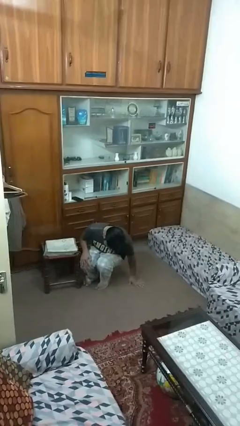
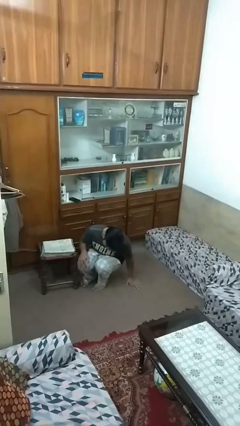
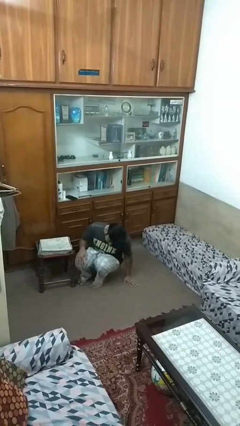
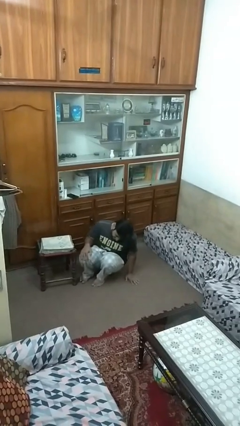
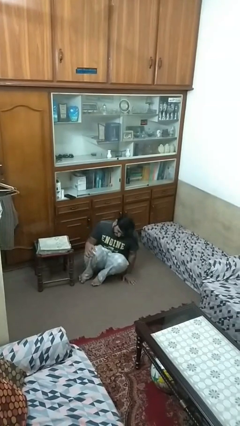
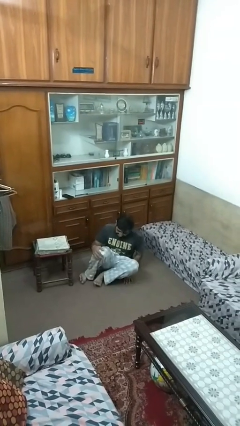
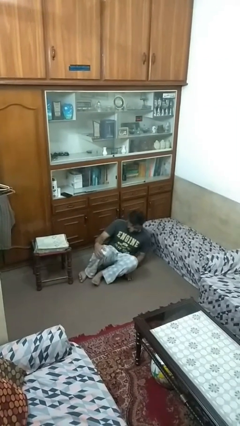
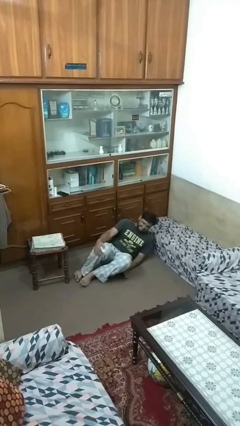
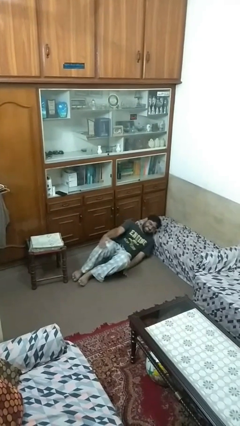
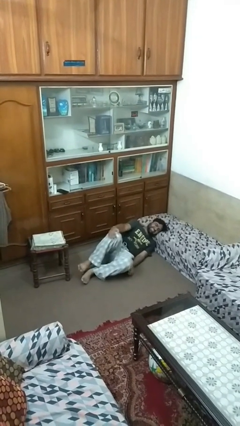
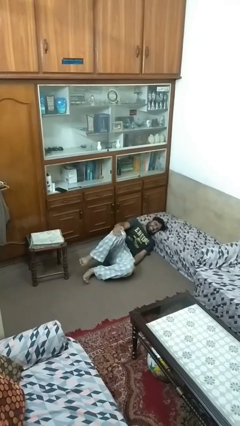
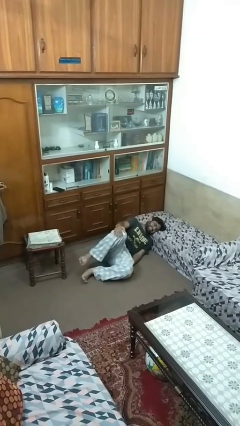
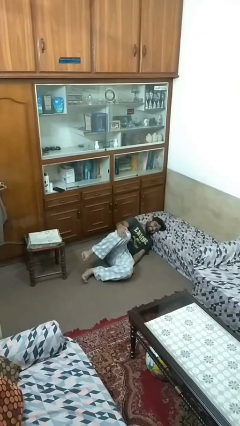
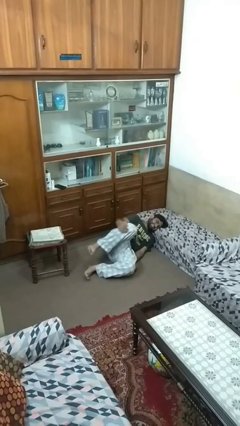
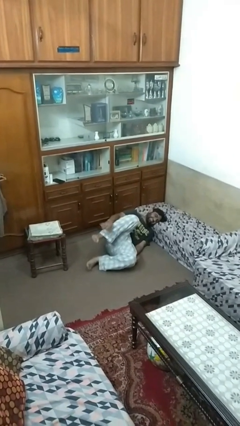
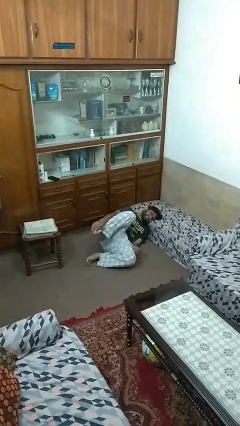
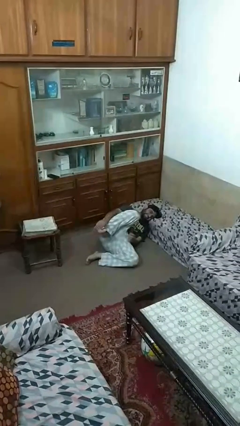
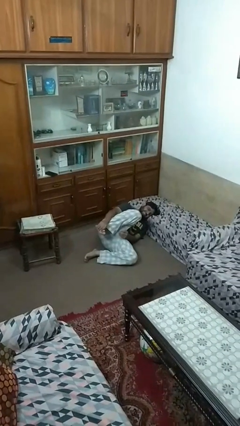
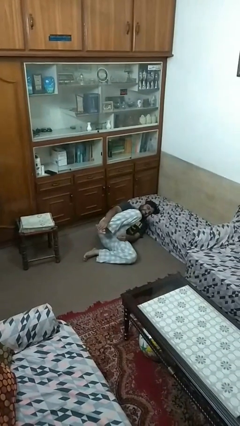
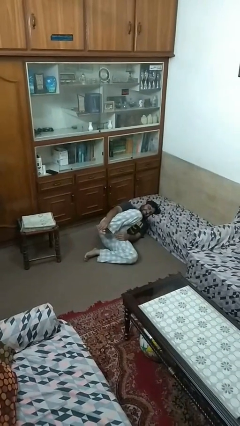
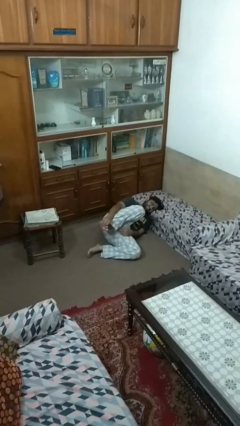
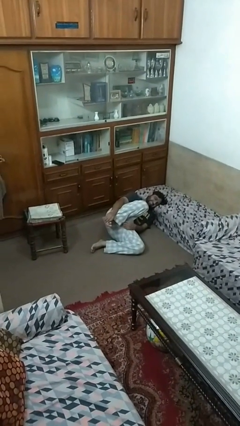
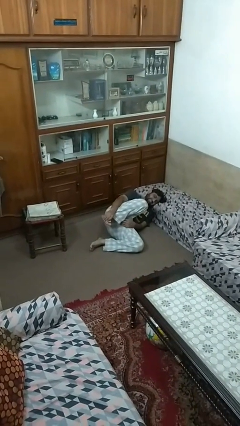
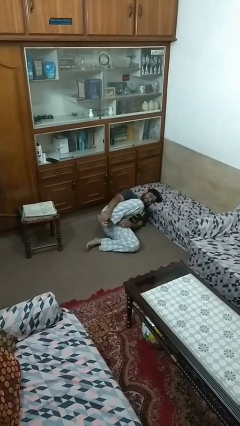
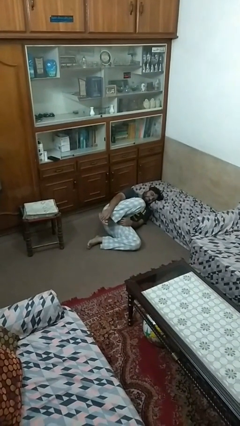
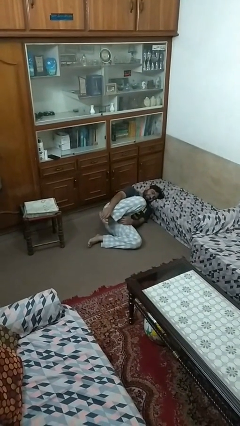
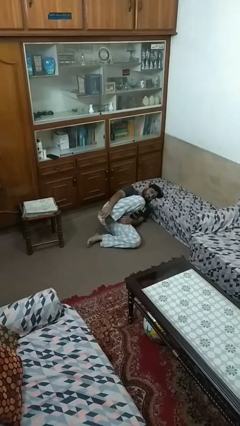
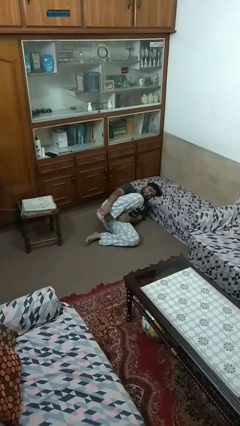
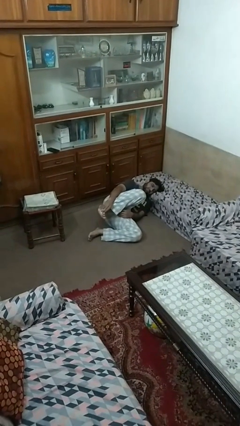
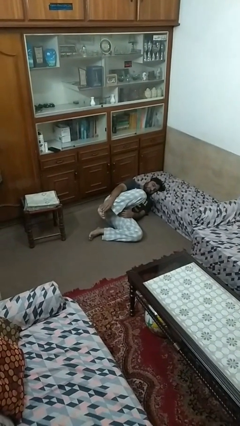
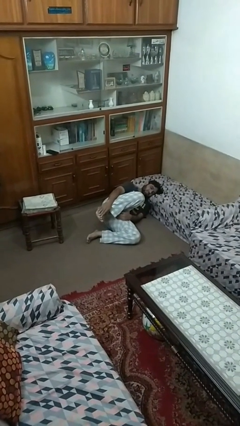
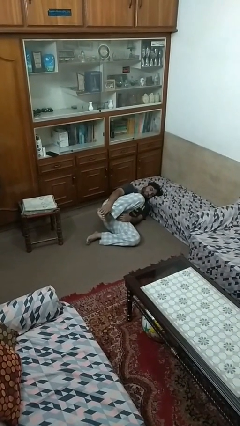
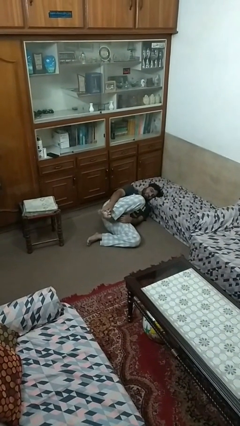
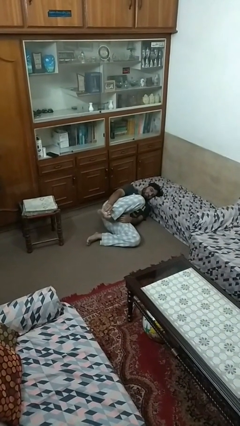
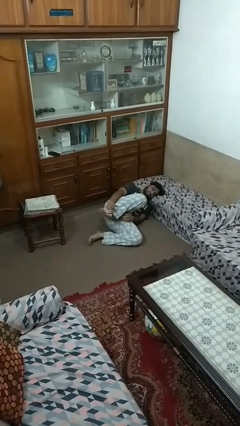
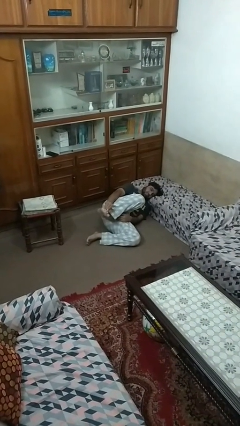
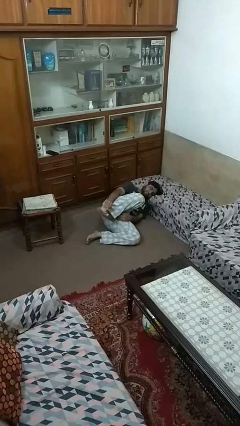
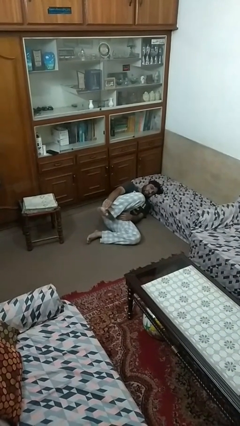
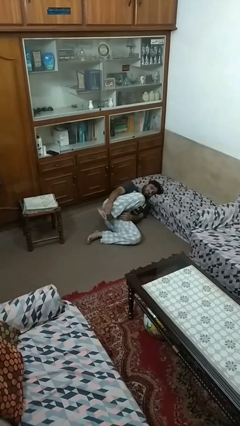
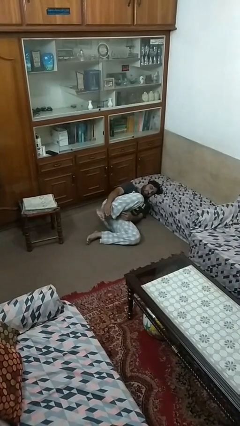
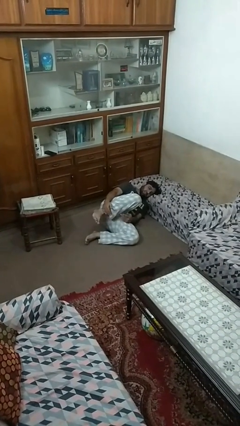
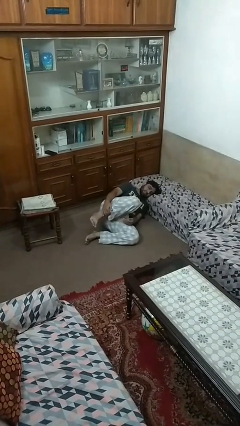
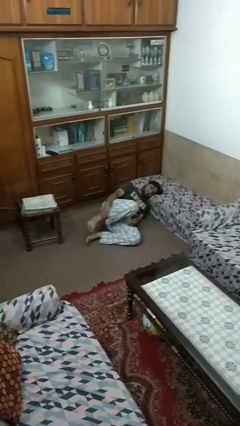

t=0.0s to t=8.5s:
person lies down on floor

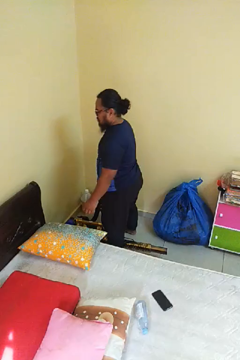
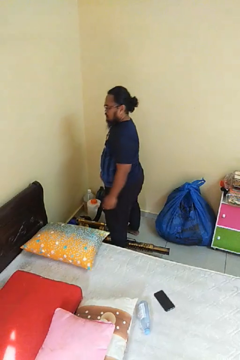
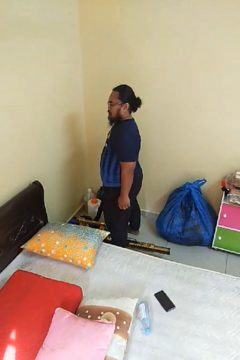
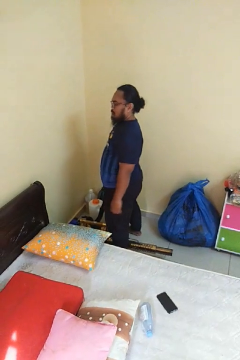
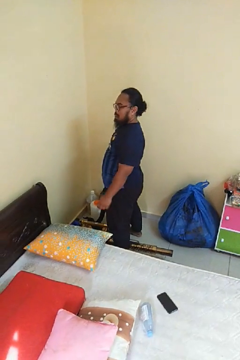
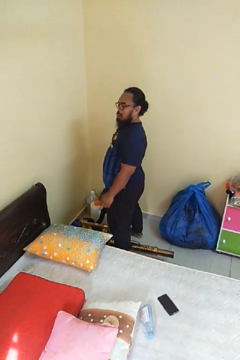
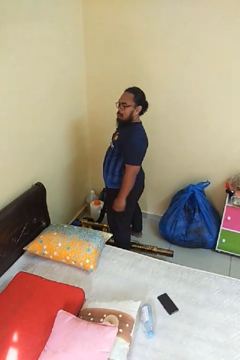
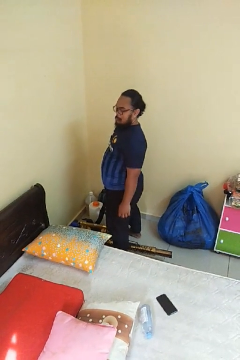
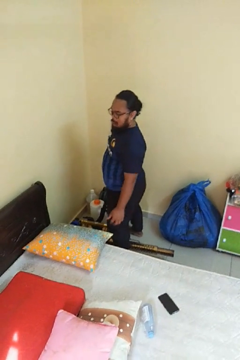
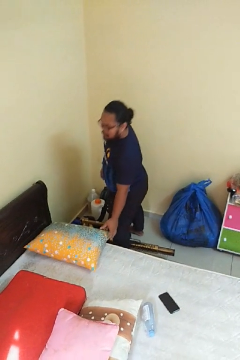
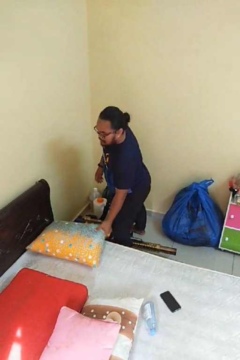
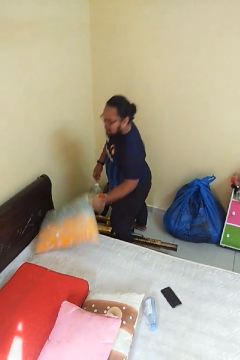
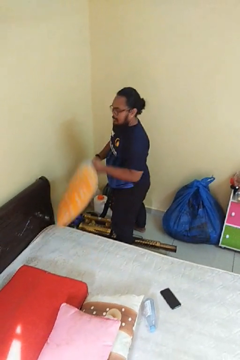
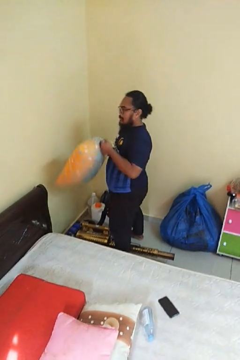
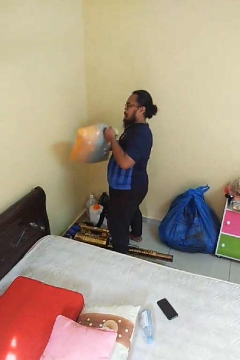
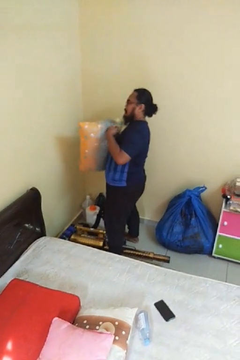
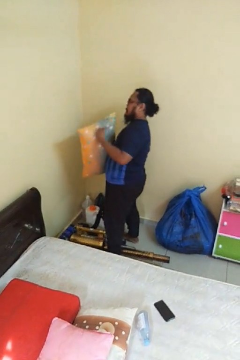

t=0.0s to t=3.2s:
person picks up object from bed

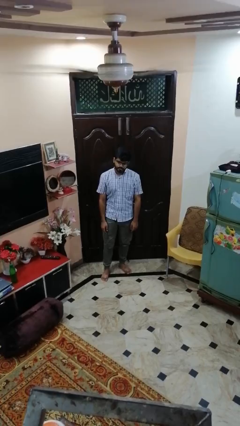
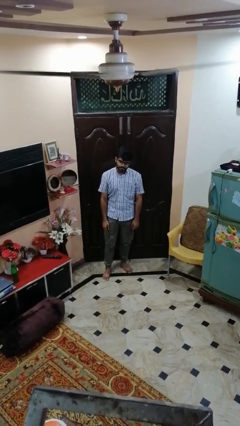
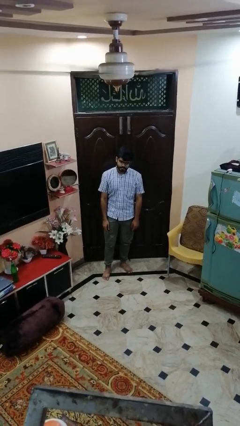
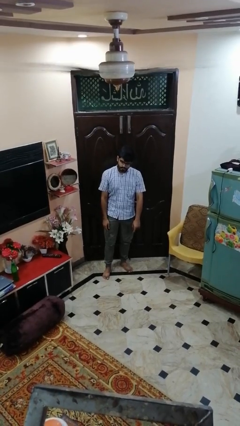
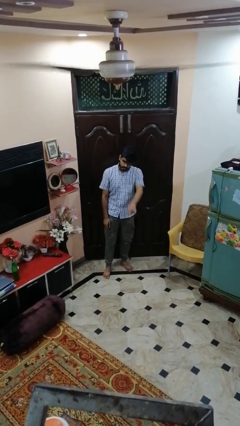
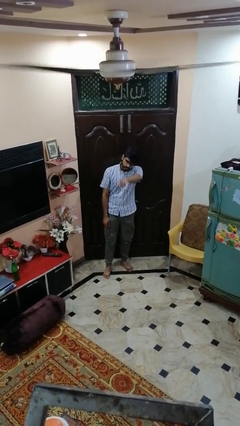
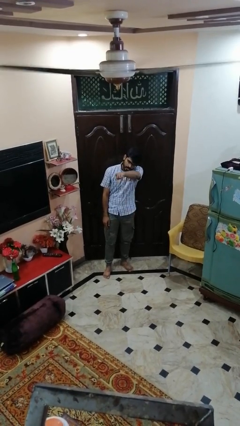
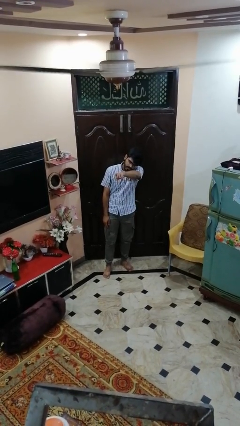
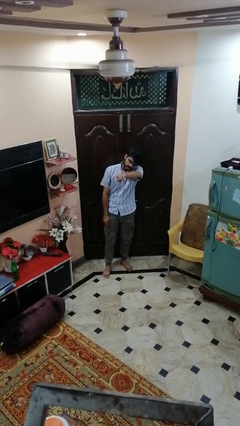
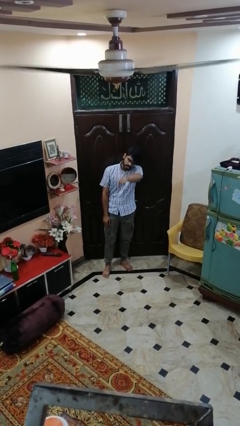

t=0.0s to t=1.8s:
person points at person

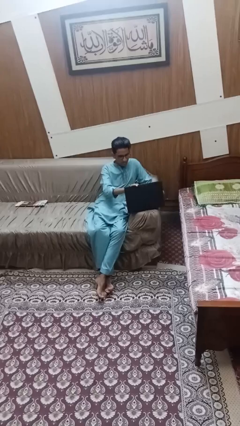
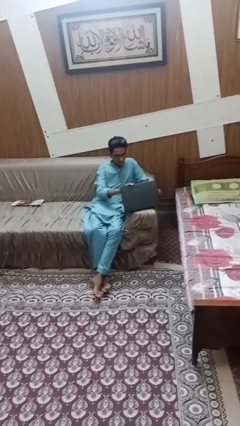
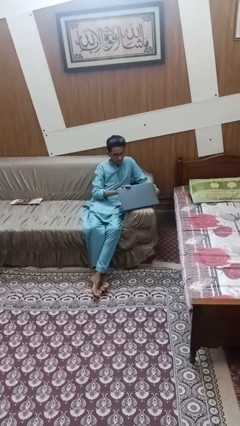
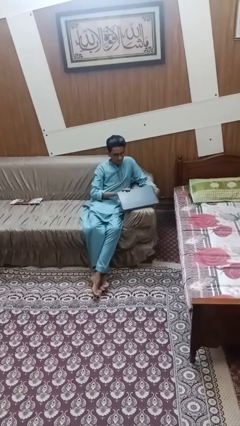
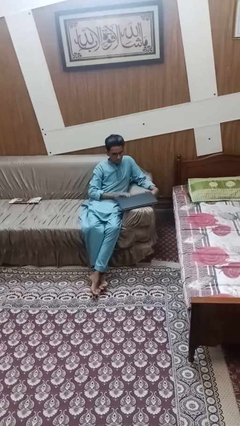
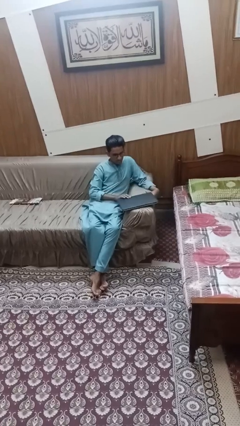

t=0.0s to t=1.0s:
person closes laptop

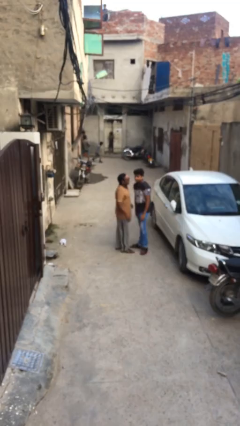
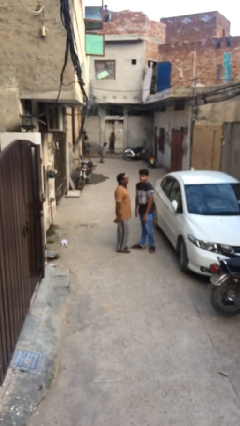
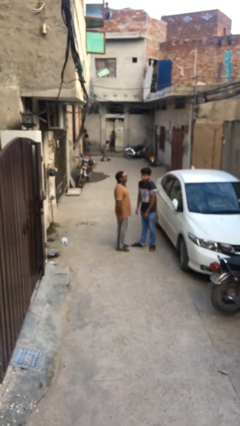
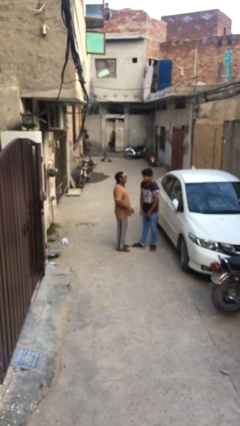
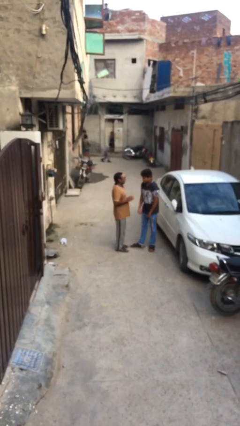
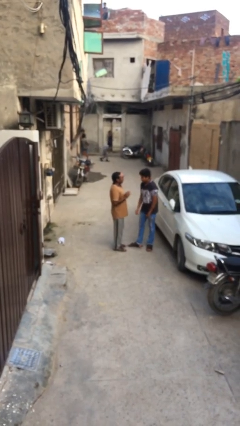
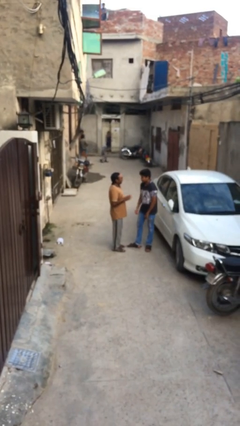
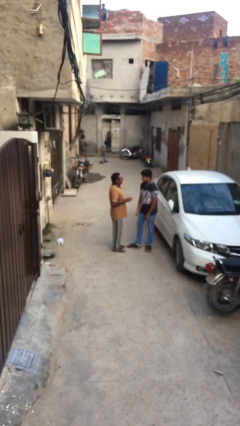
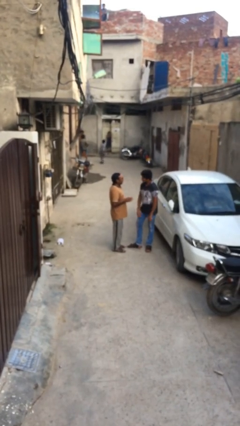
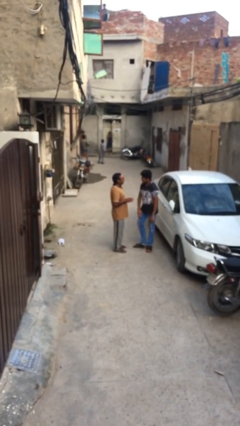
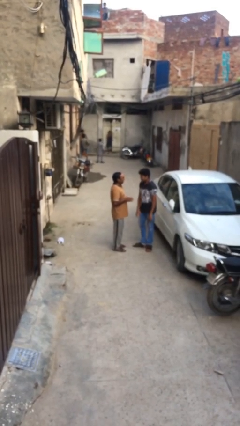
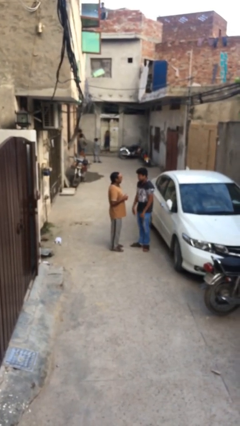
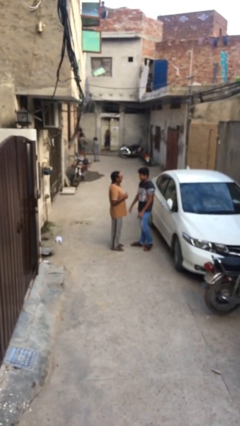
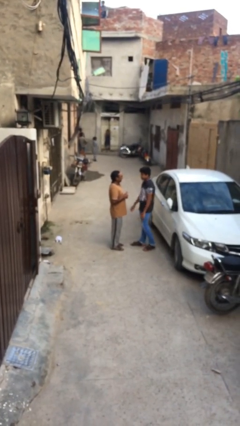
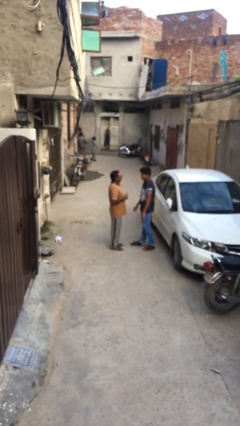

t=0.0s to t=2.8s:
person talks to person

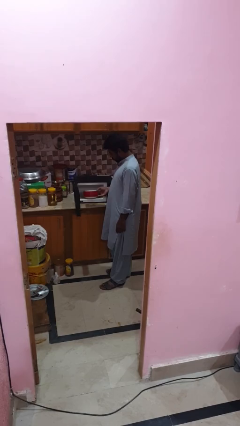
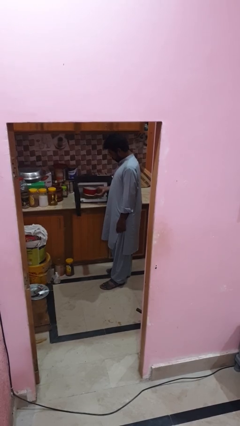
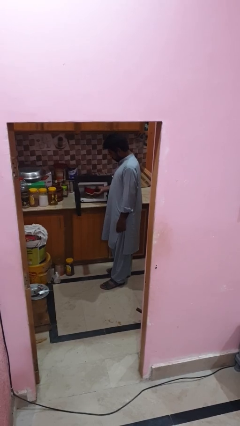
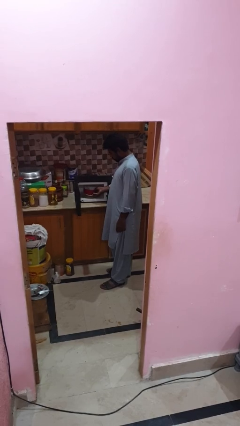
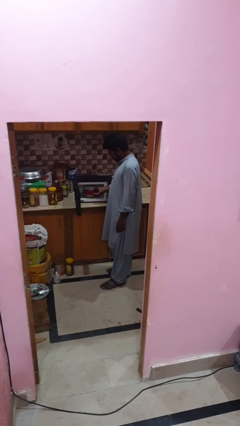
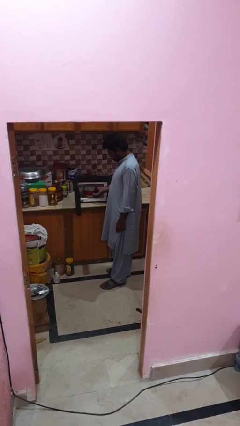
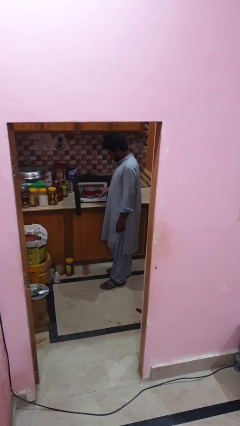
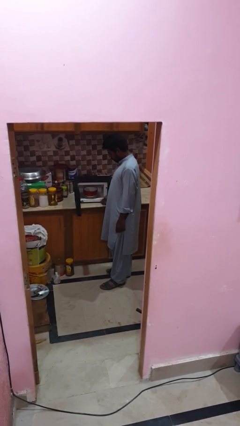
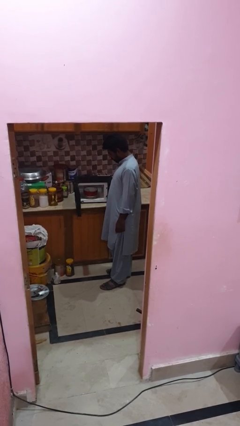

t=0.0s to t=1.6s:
person puts object into microwave
